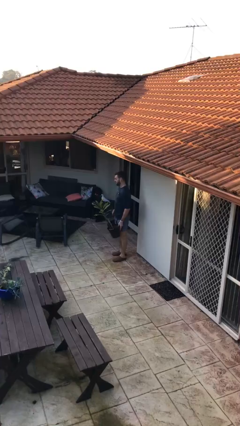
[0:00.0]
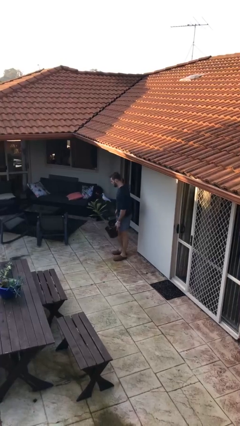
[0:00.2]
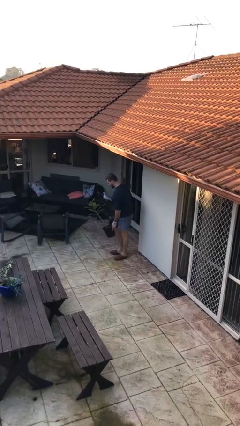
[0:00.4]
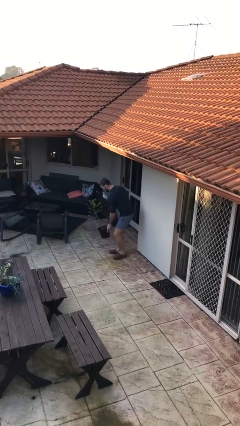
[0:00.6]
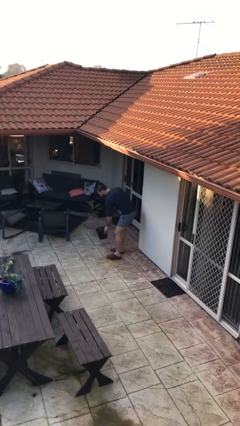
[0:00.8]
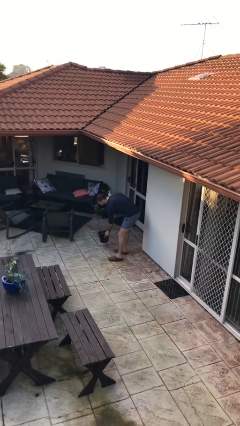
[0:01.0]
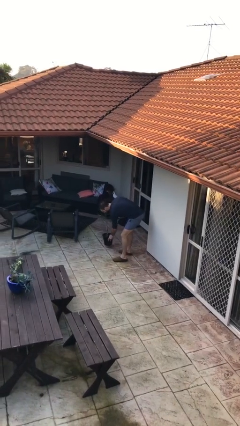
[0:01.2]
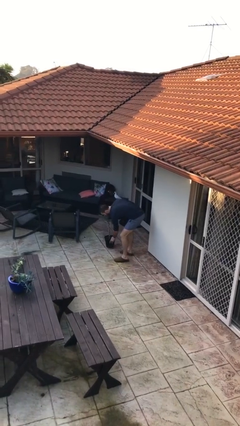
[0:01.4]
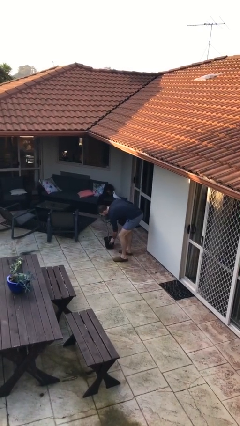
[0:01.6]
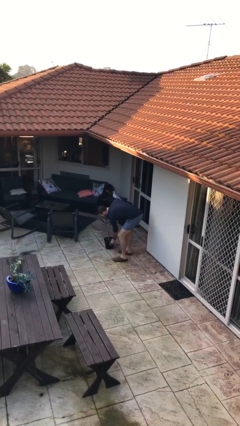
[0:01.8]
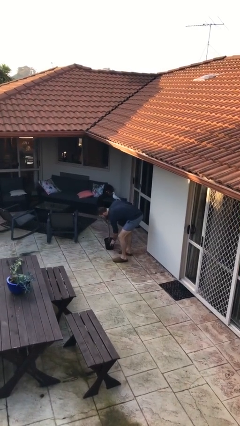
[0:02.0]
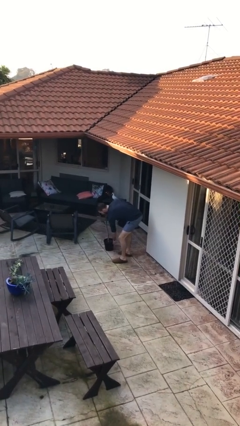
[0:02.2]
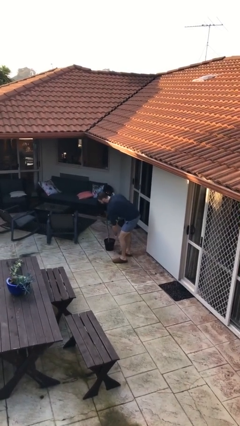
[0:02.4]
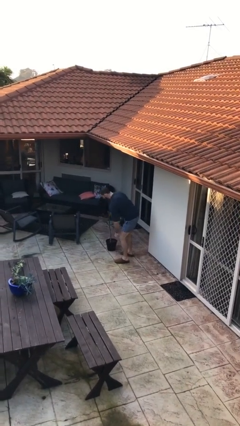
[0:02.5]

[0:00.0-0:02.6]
person puts down object on floor

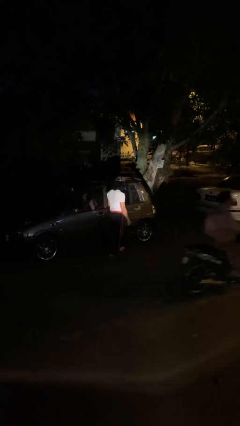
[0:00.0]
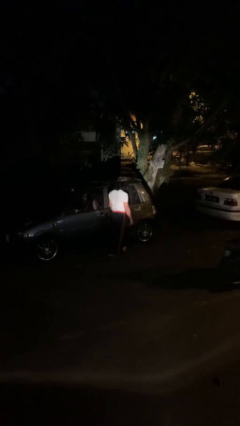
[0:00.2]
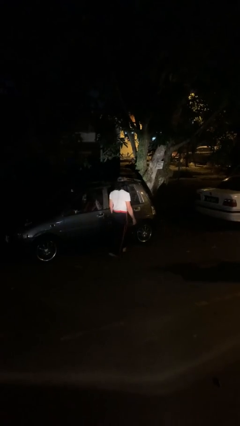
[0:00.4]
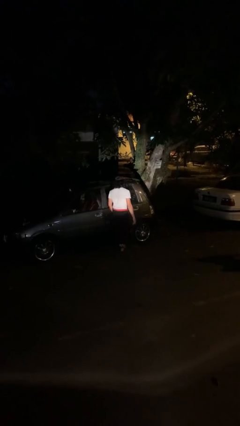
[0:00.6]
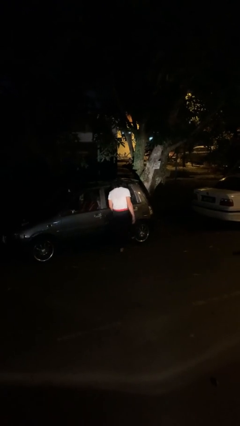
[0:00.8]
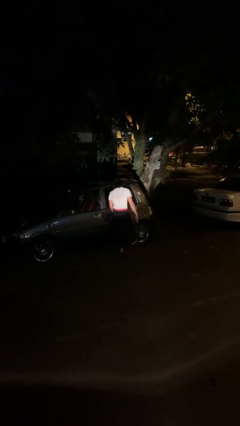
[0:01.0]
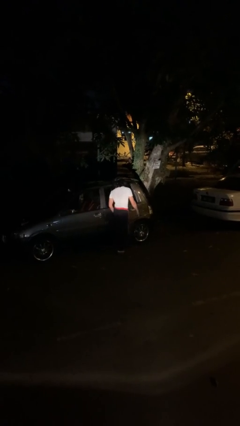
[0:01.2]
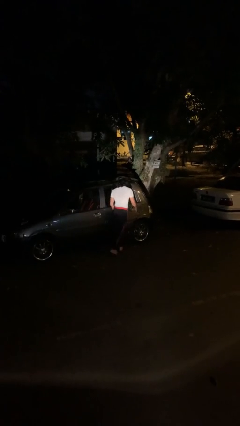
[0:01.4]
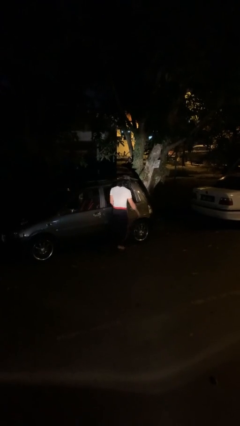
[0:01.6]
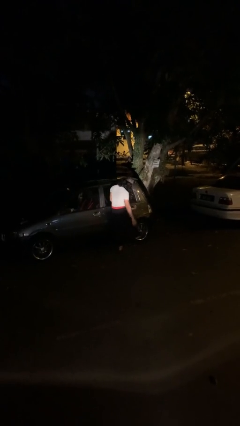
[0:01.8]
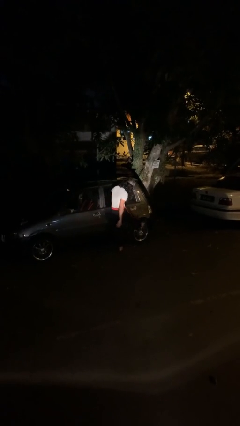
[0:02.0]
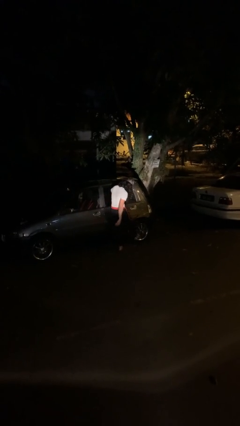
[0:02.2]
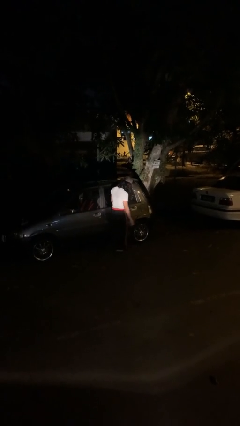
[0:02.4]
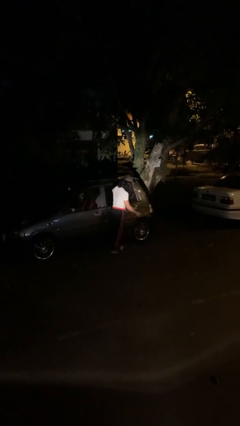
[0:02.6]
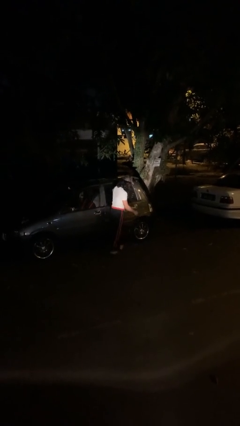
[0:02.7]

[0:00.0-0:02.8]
person kicks car tires

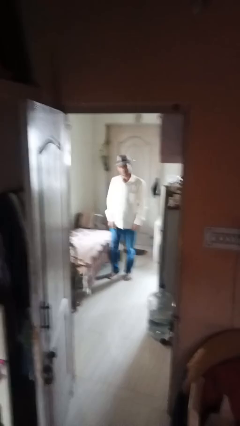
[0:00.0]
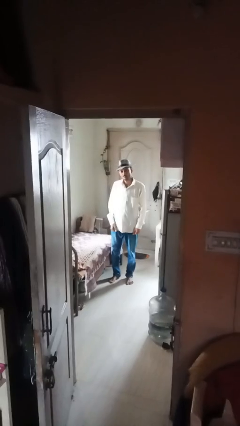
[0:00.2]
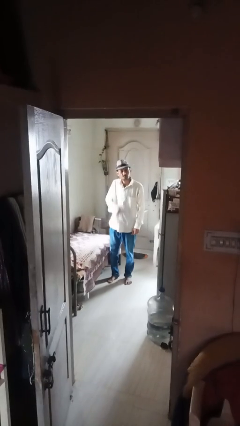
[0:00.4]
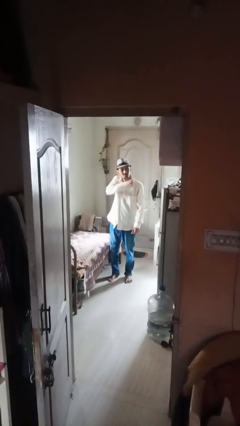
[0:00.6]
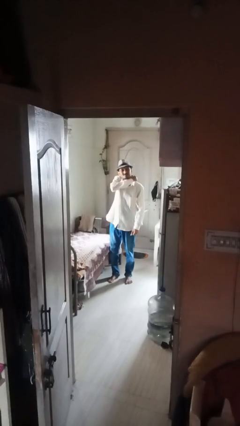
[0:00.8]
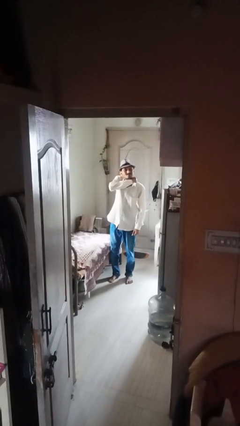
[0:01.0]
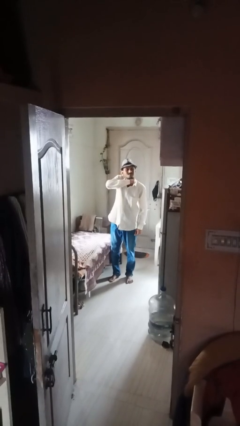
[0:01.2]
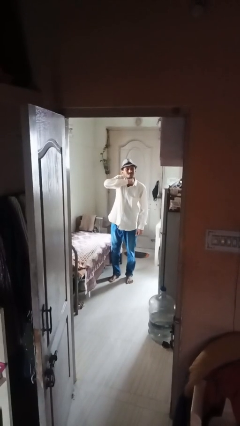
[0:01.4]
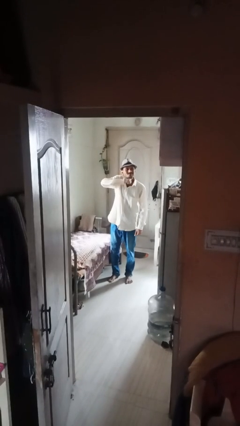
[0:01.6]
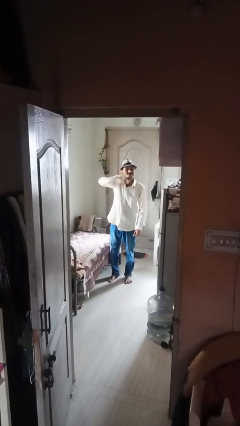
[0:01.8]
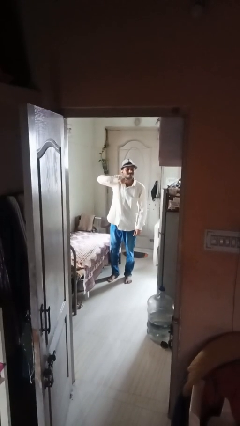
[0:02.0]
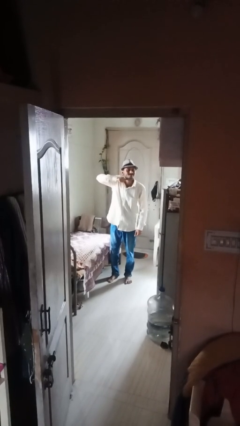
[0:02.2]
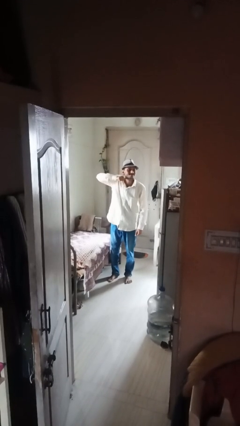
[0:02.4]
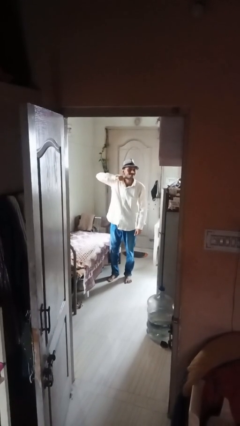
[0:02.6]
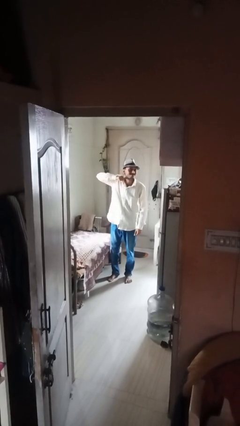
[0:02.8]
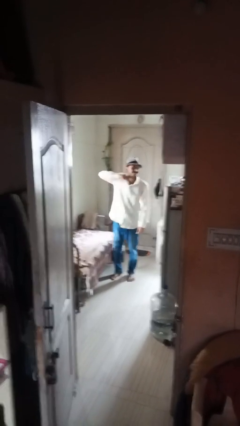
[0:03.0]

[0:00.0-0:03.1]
person gestures cut

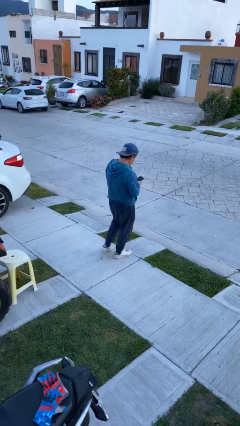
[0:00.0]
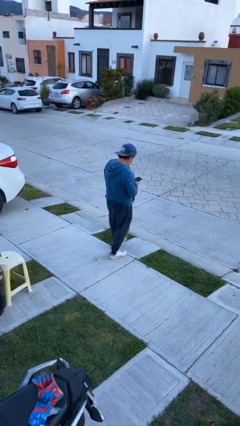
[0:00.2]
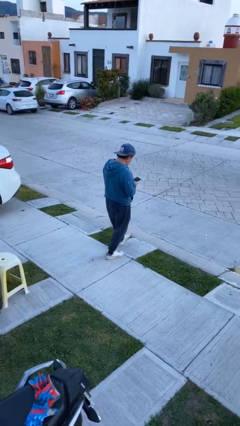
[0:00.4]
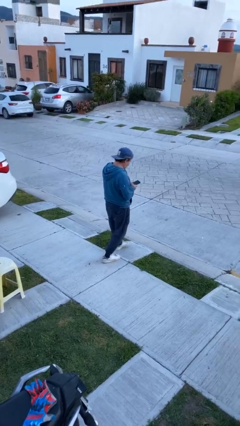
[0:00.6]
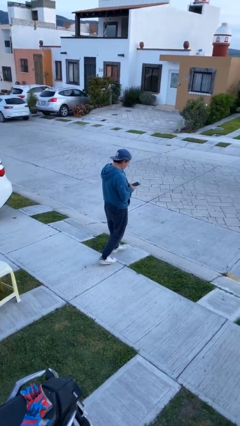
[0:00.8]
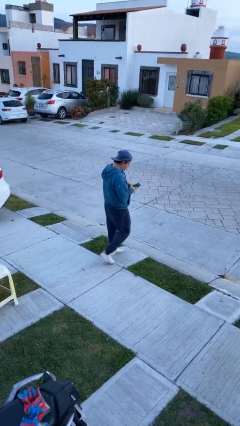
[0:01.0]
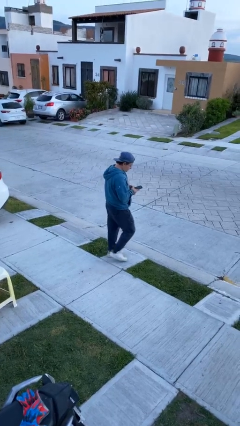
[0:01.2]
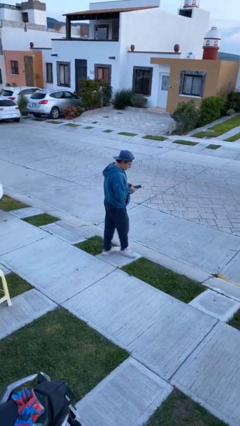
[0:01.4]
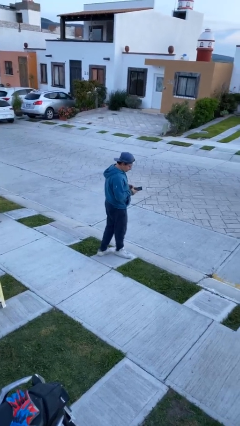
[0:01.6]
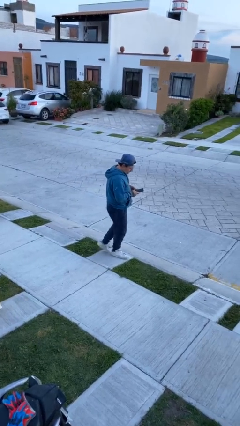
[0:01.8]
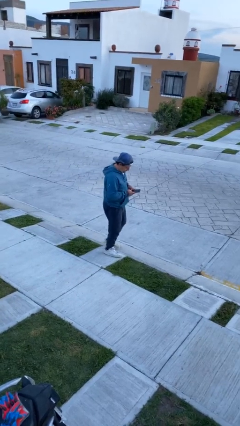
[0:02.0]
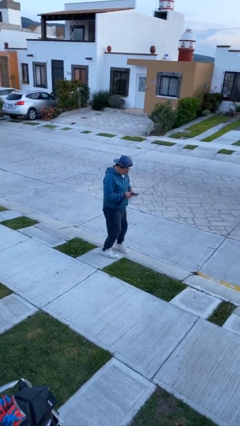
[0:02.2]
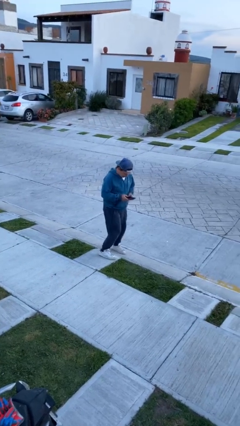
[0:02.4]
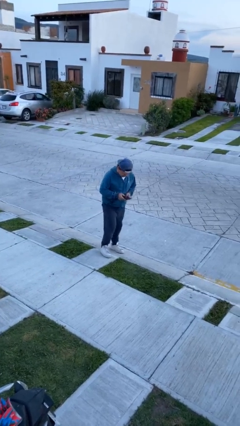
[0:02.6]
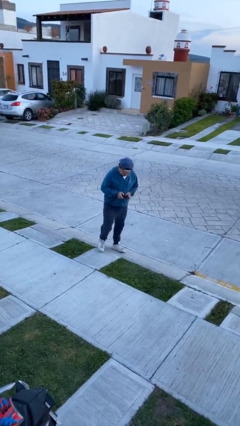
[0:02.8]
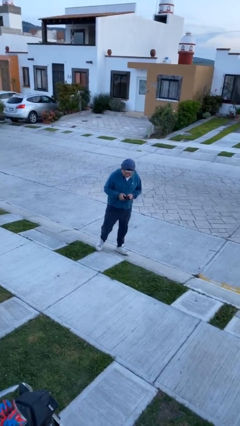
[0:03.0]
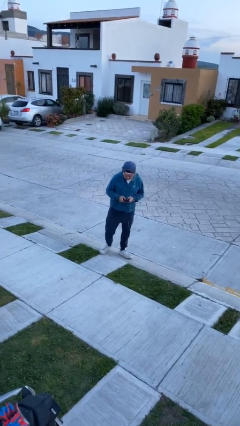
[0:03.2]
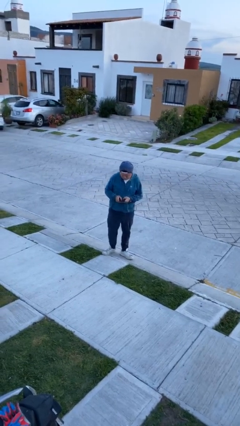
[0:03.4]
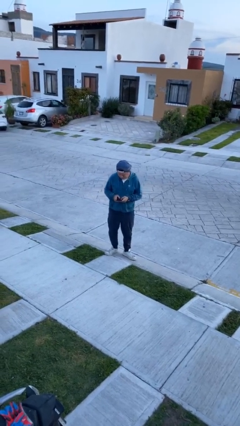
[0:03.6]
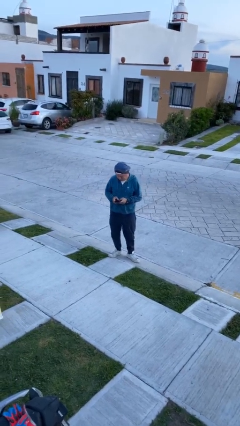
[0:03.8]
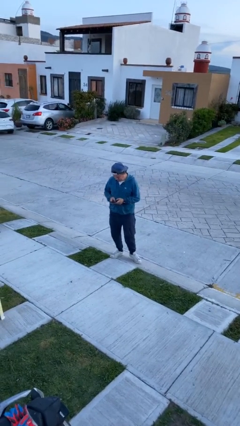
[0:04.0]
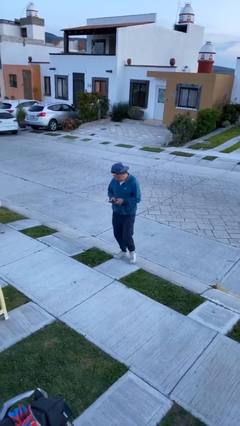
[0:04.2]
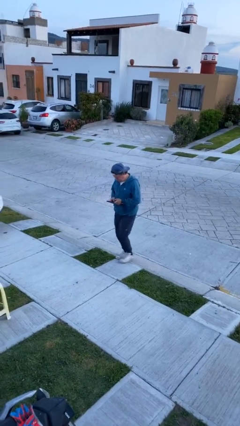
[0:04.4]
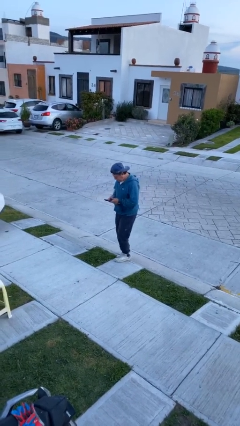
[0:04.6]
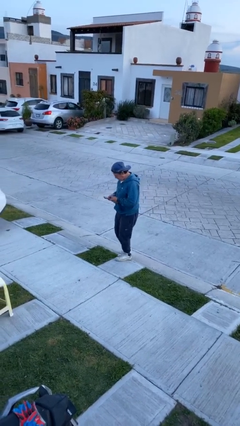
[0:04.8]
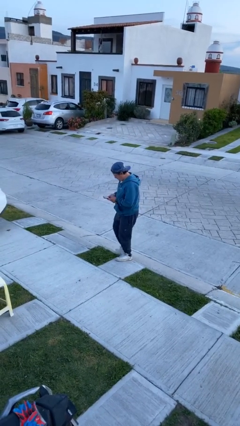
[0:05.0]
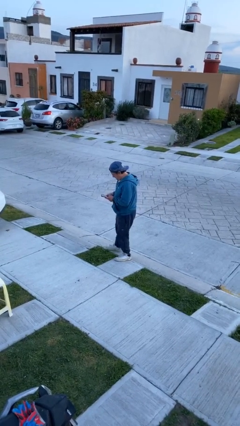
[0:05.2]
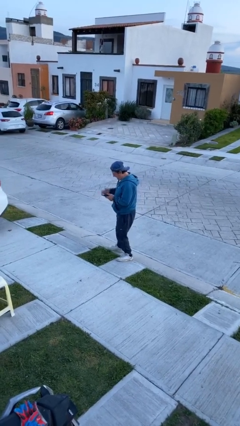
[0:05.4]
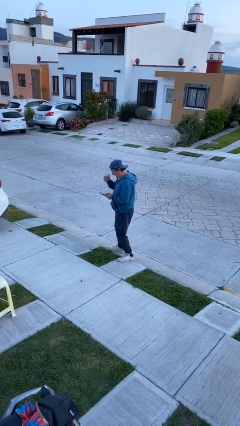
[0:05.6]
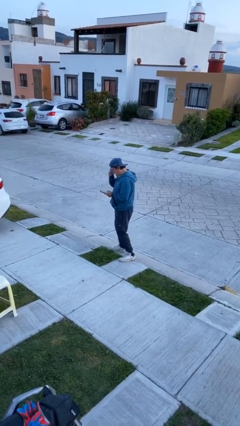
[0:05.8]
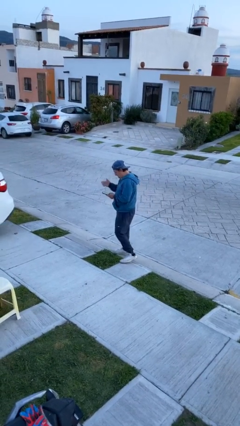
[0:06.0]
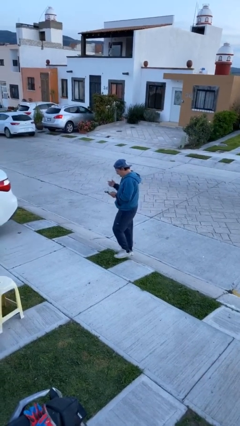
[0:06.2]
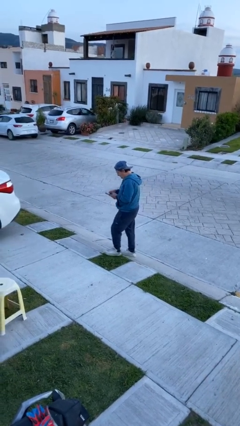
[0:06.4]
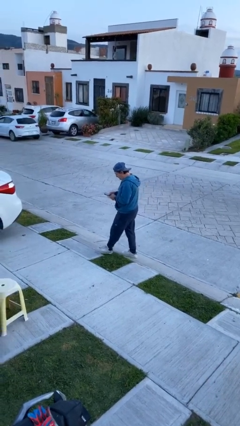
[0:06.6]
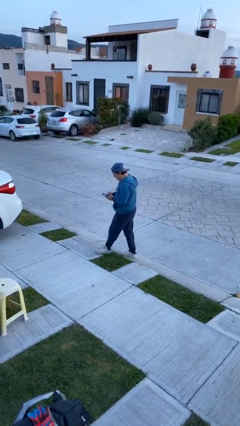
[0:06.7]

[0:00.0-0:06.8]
person texts on phone

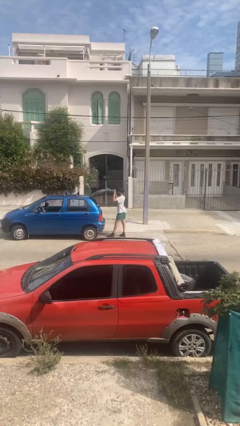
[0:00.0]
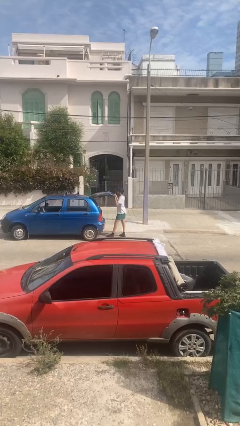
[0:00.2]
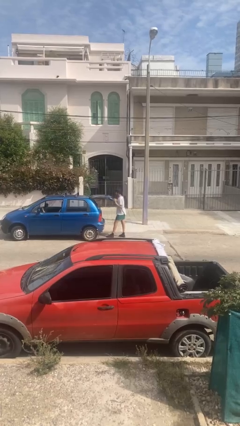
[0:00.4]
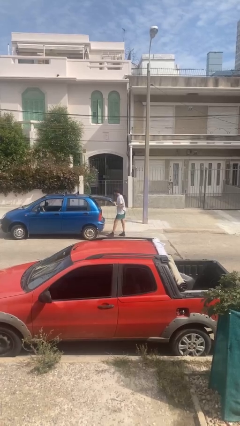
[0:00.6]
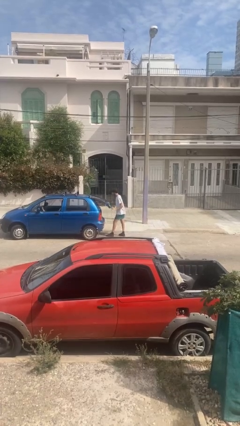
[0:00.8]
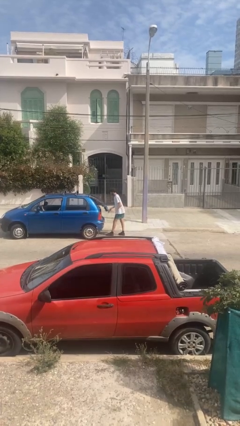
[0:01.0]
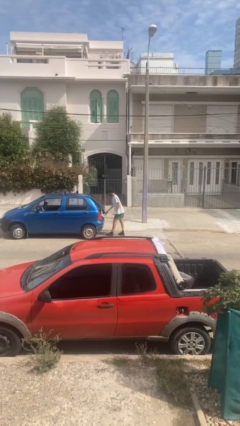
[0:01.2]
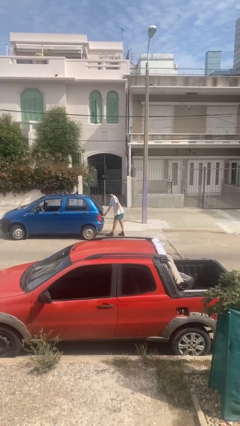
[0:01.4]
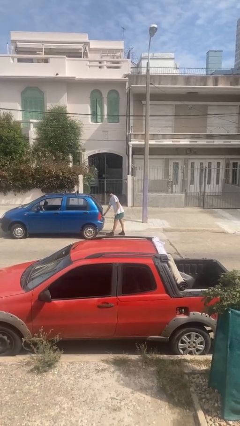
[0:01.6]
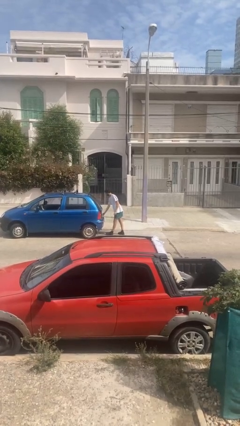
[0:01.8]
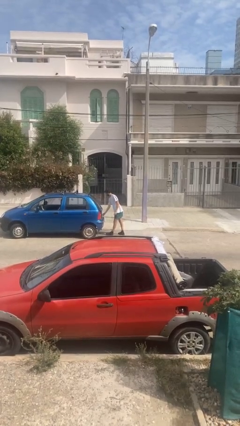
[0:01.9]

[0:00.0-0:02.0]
person closes car trunk
